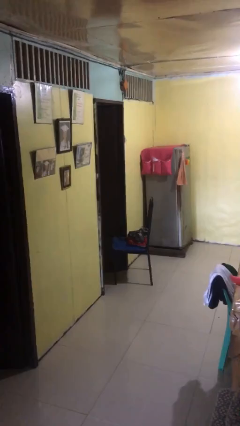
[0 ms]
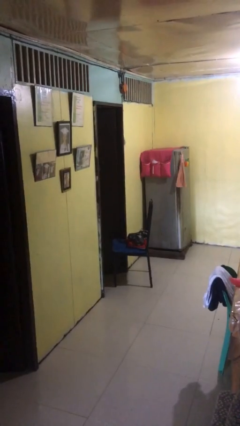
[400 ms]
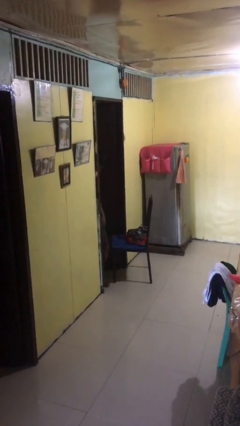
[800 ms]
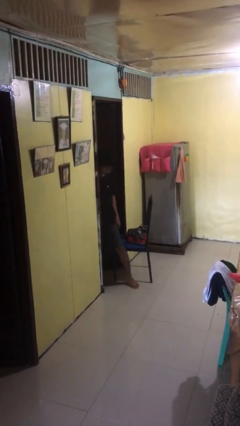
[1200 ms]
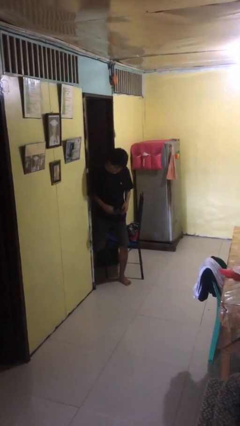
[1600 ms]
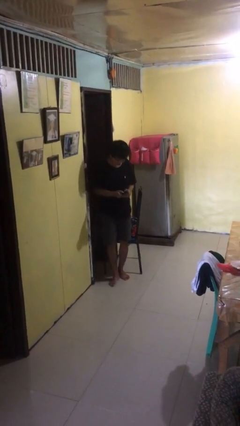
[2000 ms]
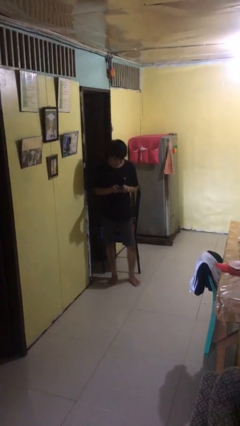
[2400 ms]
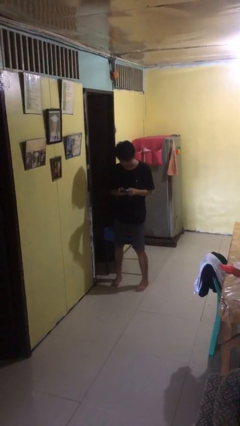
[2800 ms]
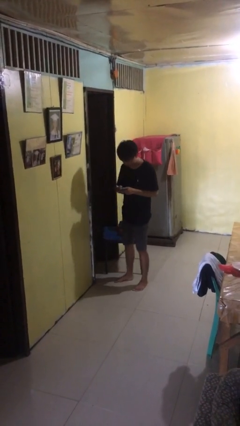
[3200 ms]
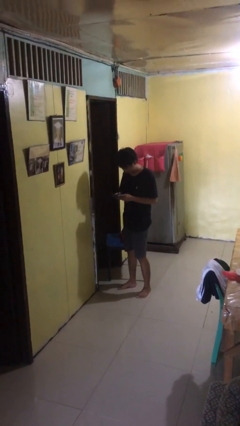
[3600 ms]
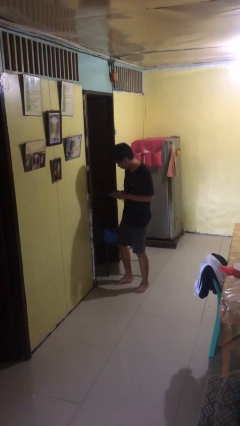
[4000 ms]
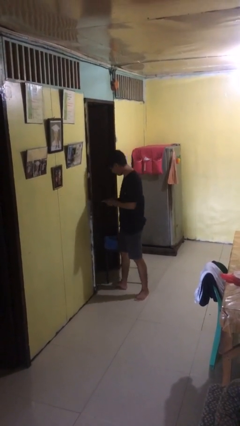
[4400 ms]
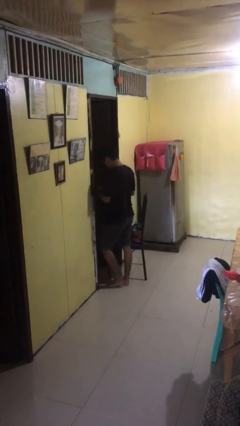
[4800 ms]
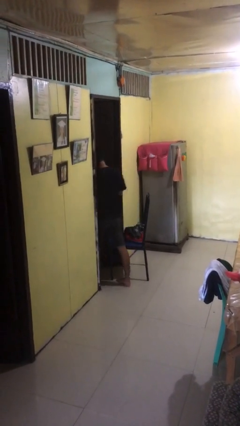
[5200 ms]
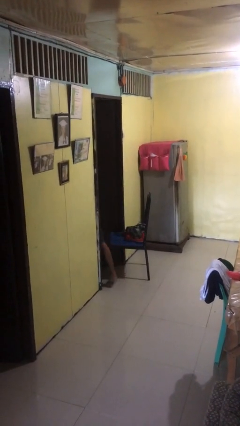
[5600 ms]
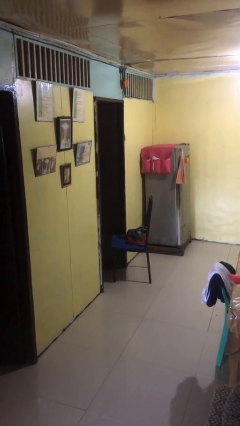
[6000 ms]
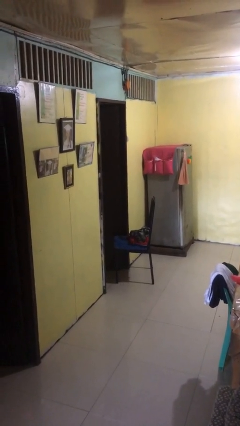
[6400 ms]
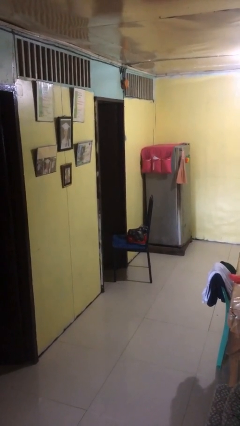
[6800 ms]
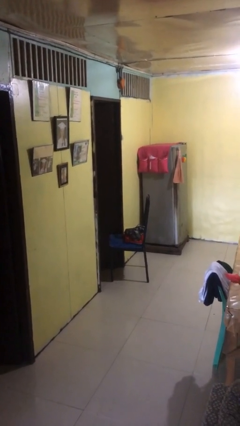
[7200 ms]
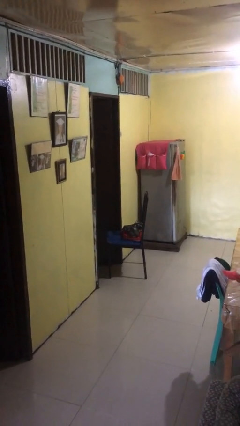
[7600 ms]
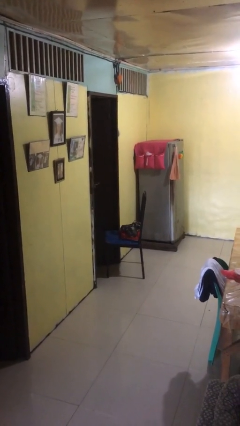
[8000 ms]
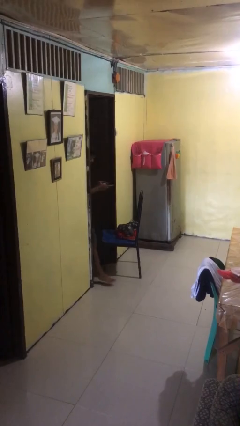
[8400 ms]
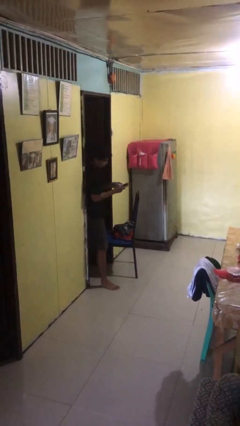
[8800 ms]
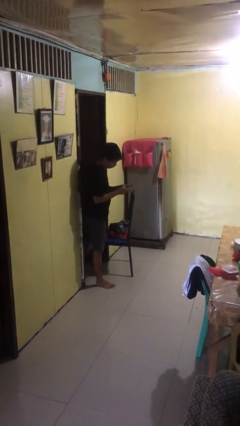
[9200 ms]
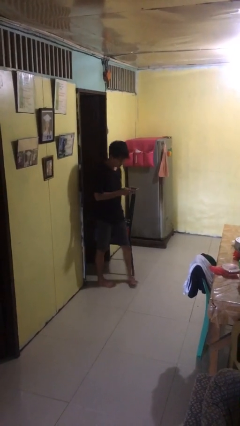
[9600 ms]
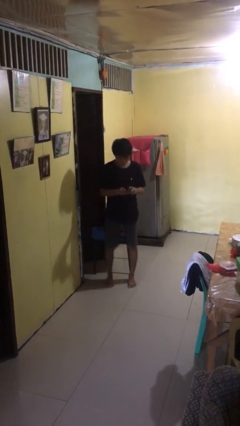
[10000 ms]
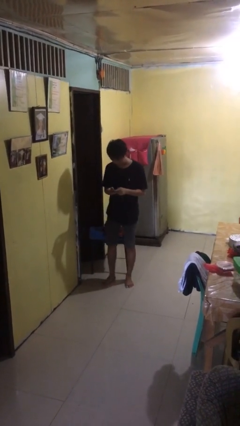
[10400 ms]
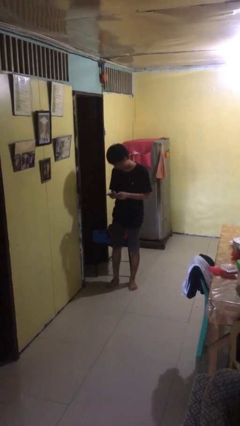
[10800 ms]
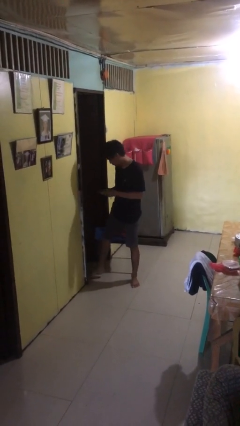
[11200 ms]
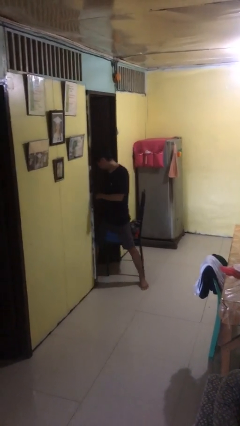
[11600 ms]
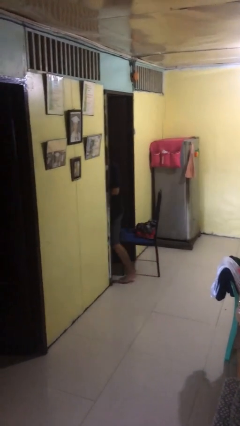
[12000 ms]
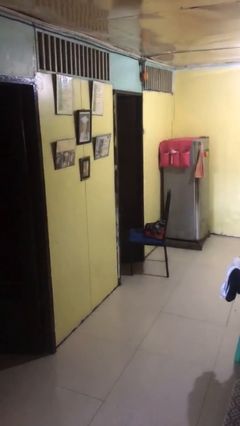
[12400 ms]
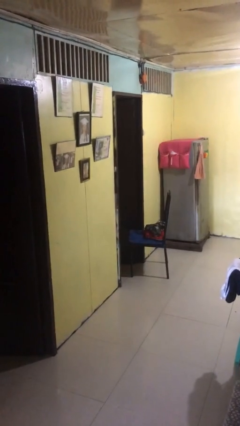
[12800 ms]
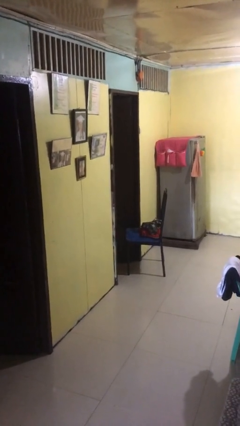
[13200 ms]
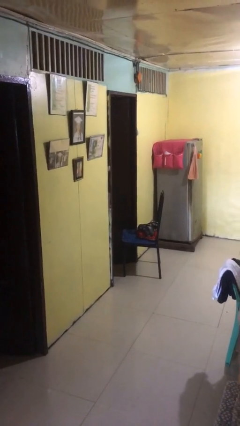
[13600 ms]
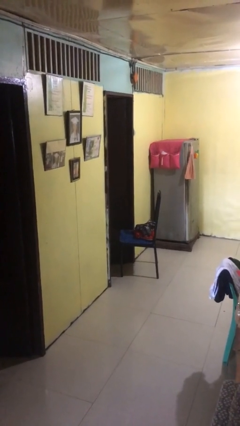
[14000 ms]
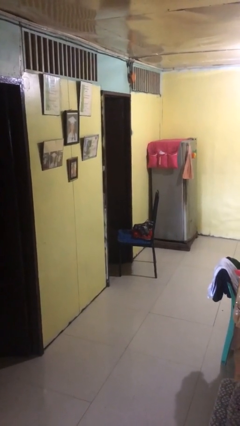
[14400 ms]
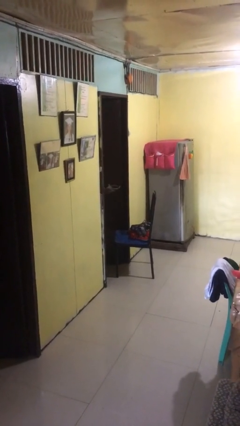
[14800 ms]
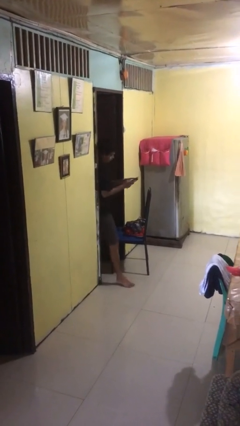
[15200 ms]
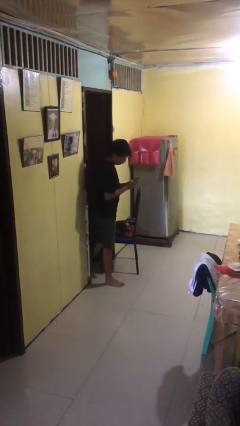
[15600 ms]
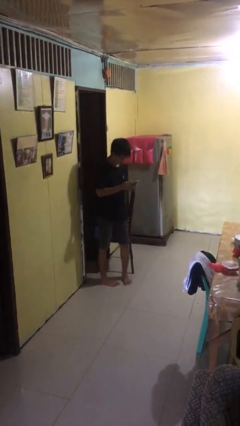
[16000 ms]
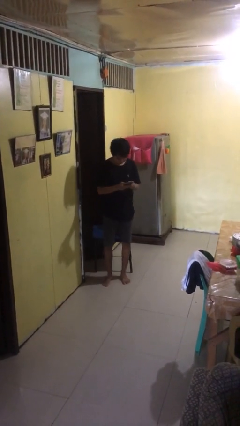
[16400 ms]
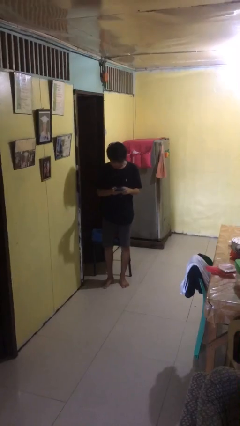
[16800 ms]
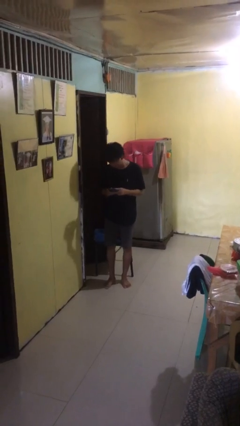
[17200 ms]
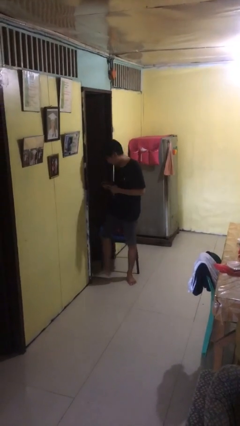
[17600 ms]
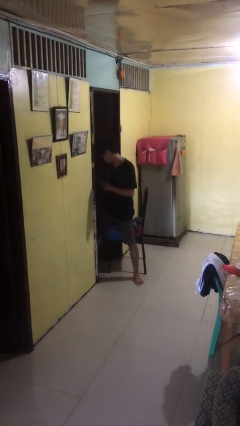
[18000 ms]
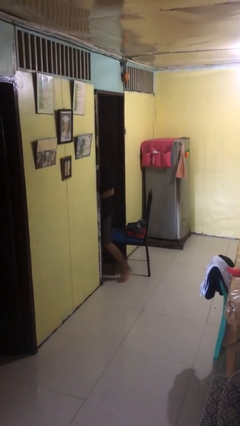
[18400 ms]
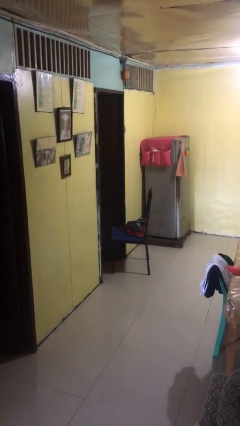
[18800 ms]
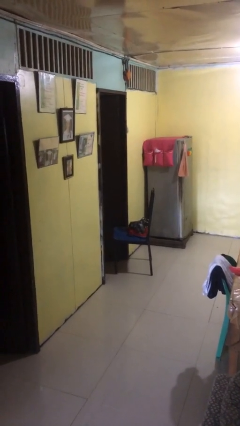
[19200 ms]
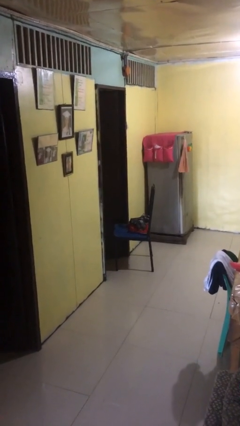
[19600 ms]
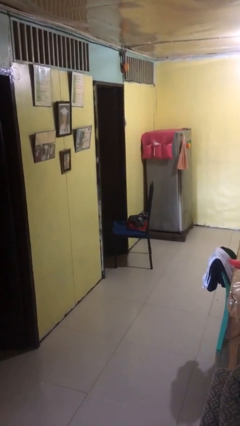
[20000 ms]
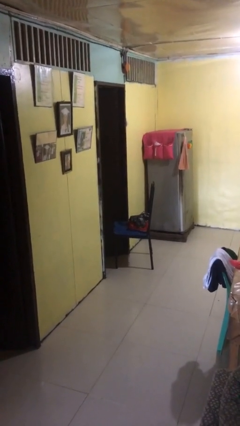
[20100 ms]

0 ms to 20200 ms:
person texts on phone

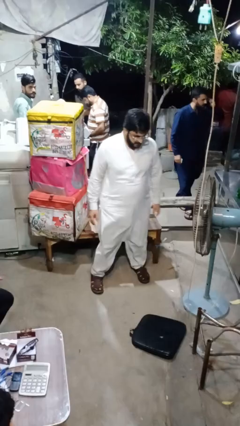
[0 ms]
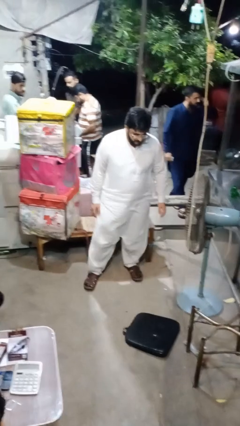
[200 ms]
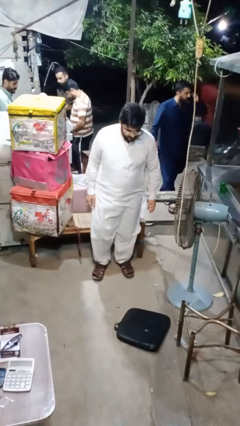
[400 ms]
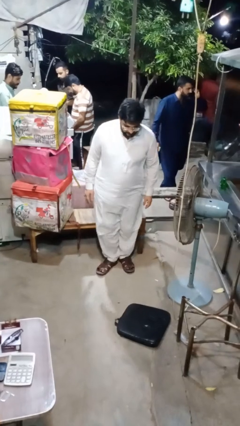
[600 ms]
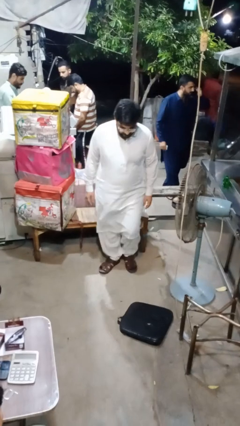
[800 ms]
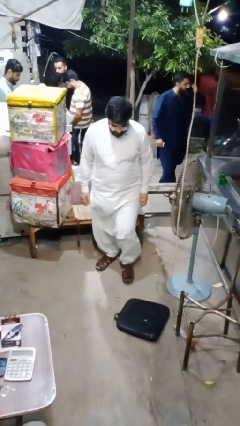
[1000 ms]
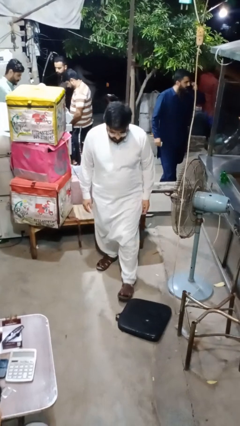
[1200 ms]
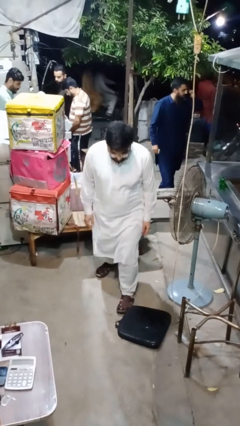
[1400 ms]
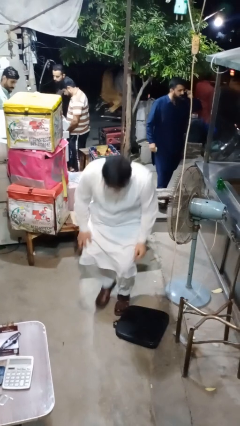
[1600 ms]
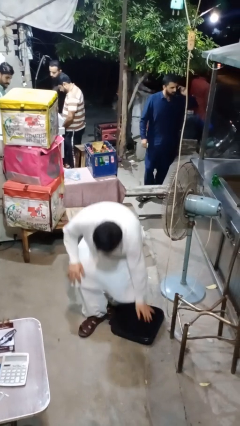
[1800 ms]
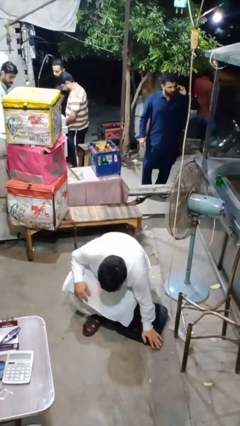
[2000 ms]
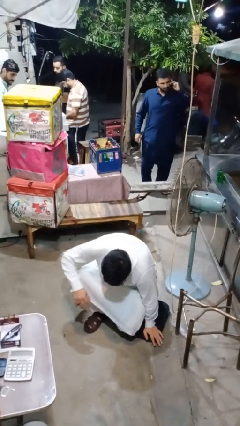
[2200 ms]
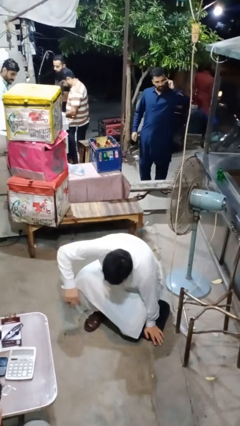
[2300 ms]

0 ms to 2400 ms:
person trips on object on floor

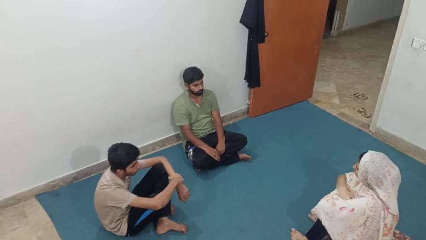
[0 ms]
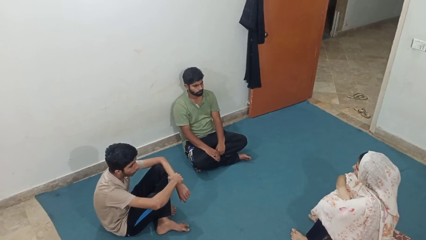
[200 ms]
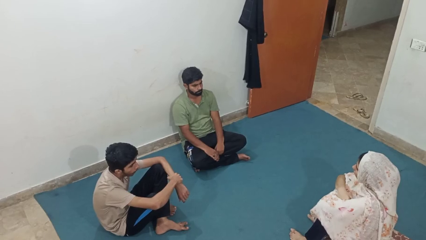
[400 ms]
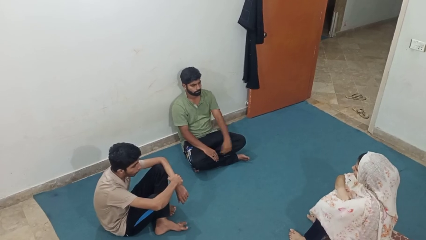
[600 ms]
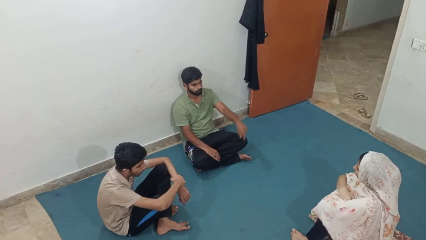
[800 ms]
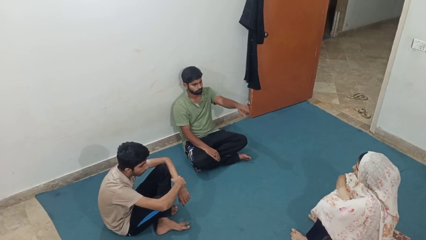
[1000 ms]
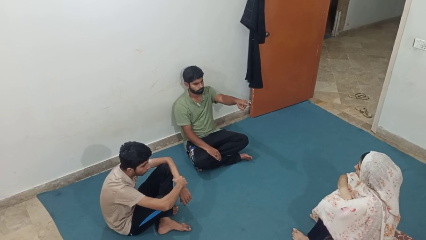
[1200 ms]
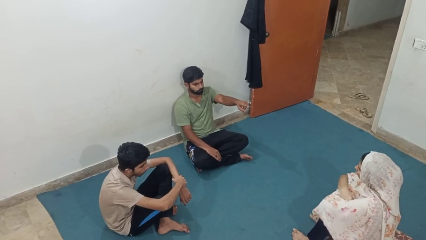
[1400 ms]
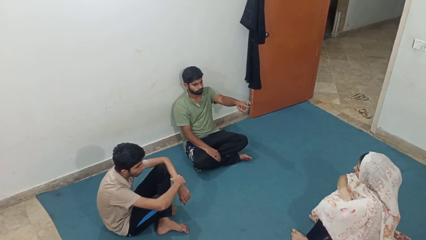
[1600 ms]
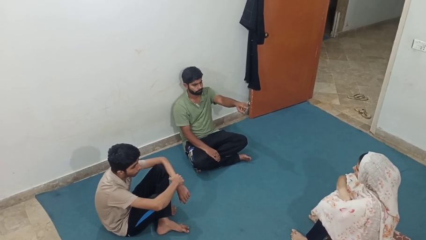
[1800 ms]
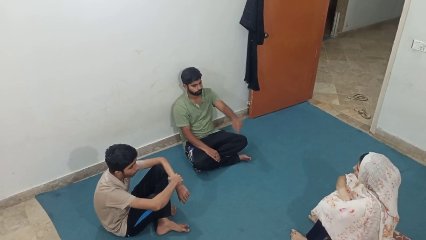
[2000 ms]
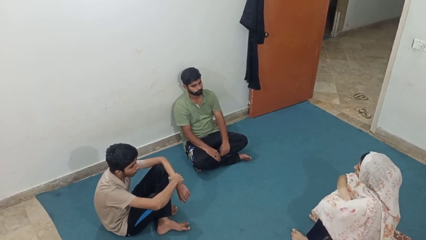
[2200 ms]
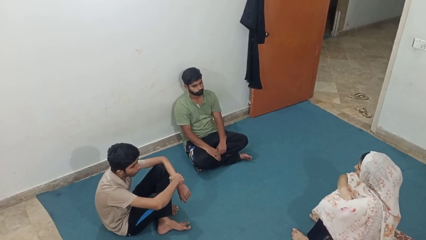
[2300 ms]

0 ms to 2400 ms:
person points at person

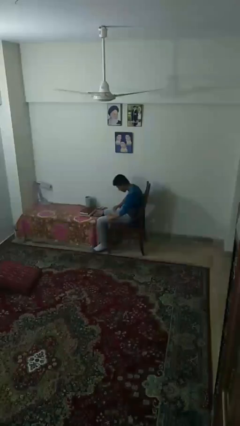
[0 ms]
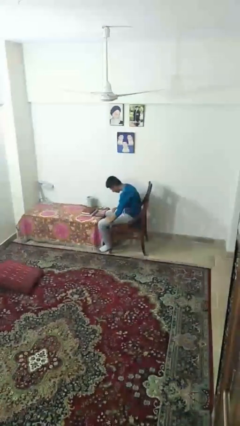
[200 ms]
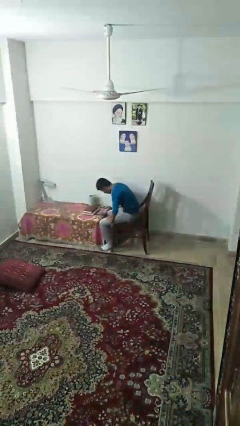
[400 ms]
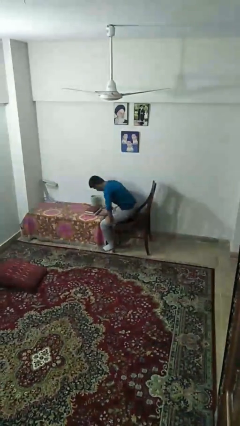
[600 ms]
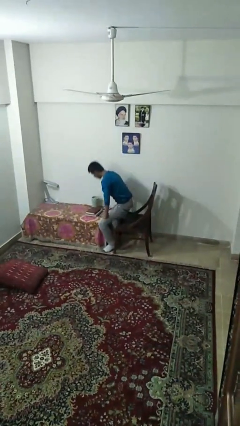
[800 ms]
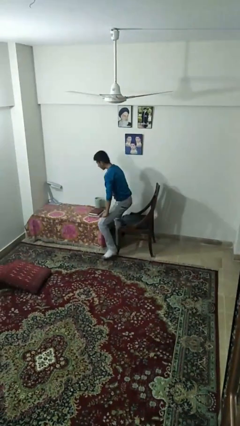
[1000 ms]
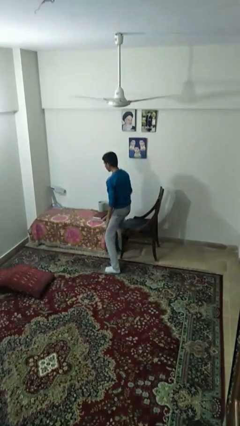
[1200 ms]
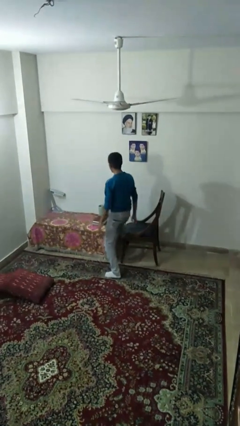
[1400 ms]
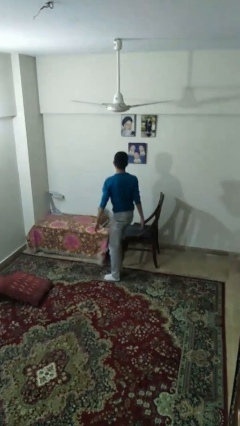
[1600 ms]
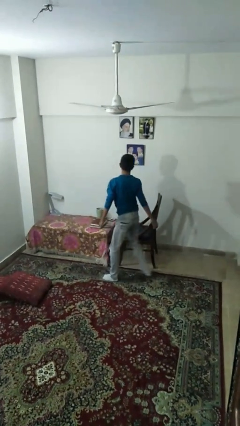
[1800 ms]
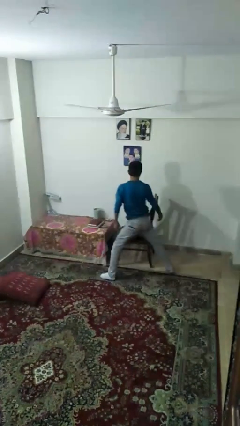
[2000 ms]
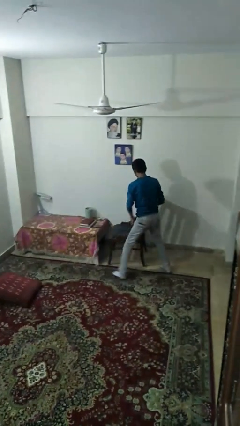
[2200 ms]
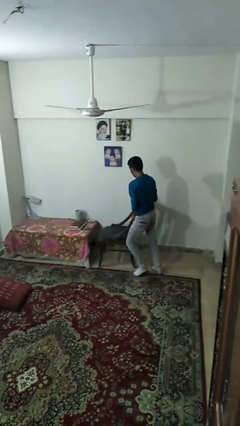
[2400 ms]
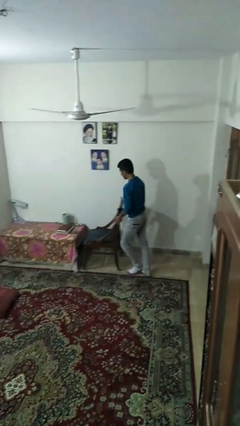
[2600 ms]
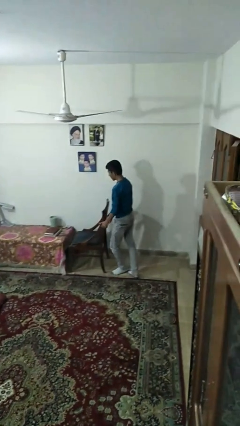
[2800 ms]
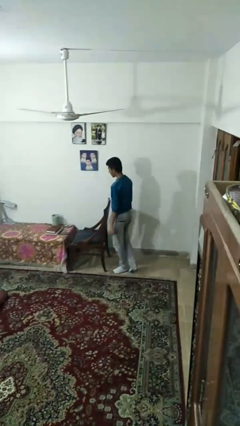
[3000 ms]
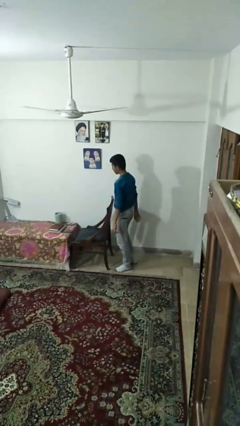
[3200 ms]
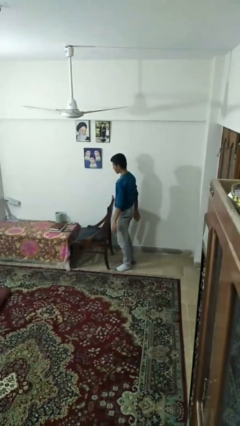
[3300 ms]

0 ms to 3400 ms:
person stands up
